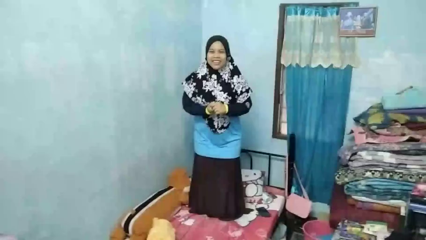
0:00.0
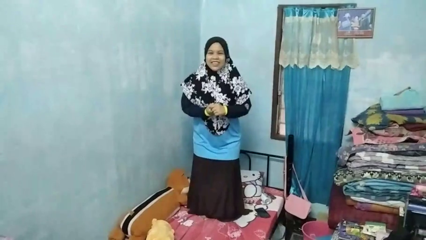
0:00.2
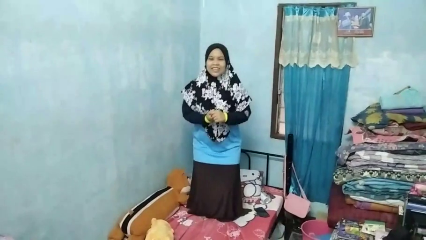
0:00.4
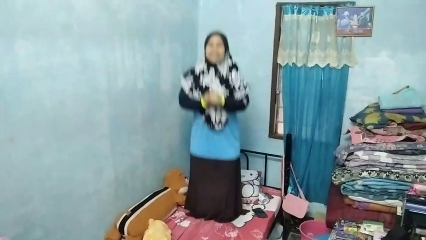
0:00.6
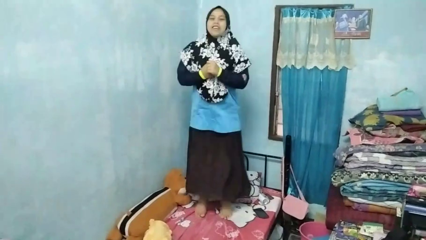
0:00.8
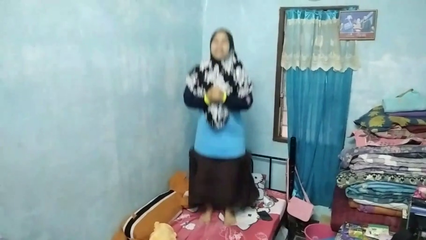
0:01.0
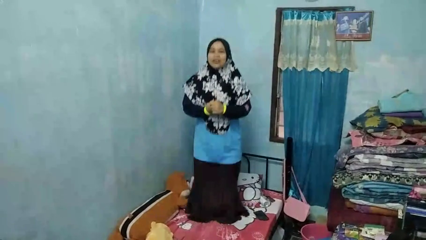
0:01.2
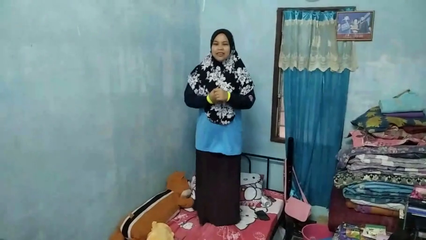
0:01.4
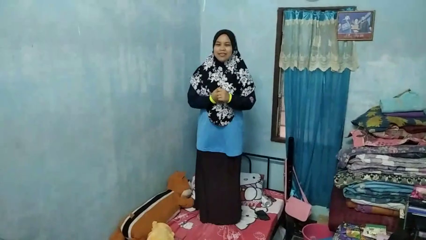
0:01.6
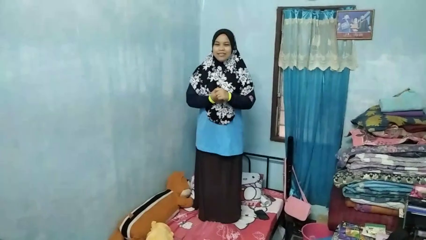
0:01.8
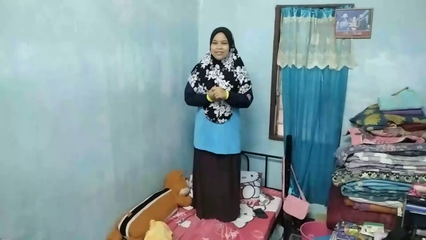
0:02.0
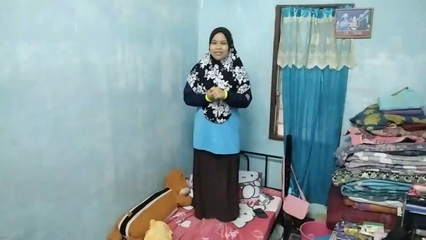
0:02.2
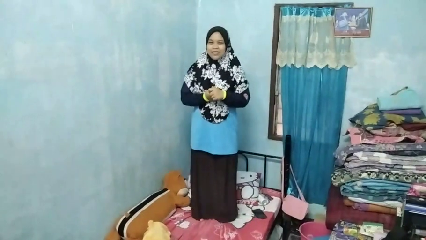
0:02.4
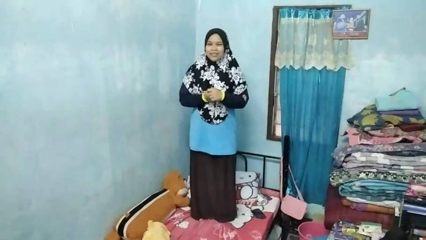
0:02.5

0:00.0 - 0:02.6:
person jumps on bed

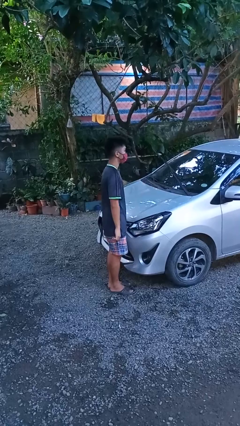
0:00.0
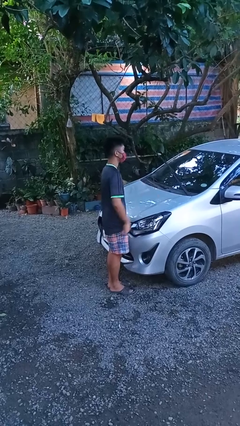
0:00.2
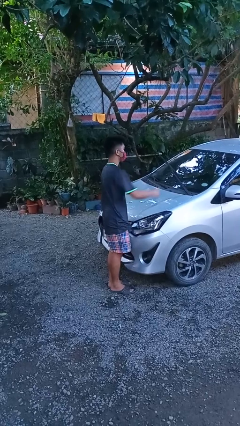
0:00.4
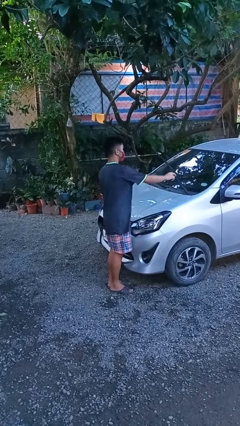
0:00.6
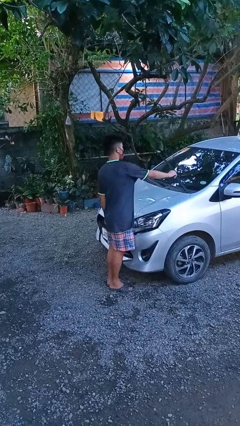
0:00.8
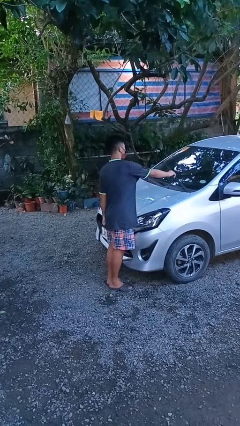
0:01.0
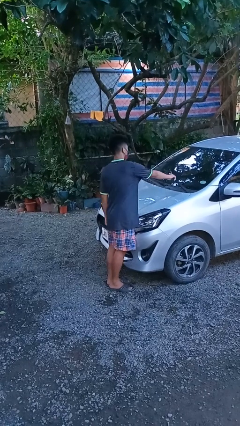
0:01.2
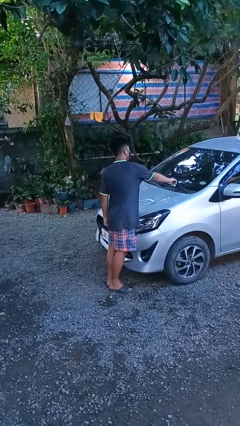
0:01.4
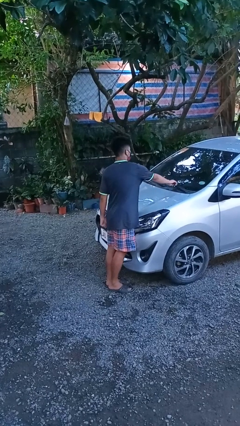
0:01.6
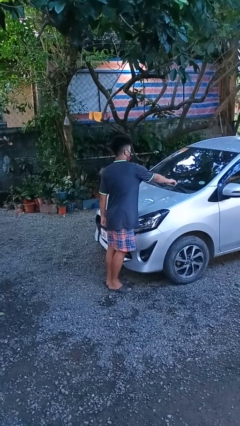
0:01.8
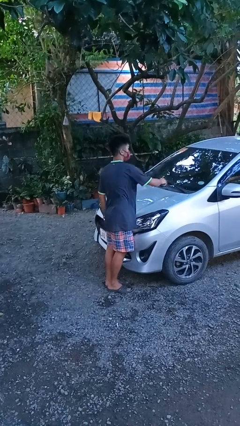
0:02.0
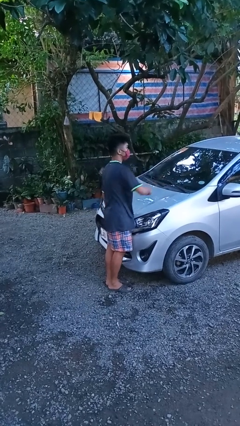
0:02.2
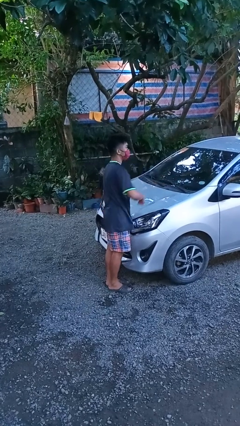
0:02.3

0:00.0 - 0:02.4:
person flips down car wipers

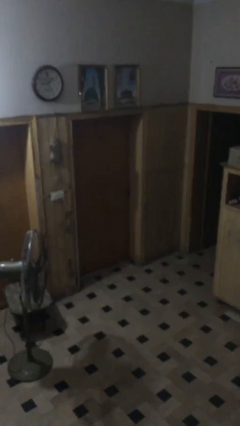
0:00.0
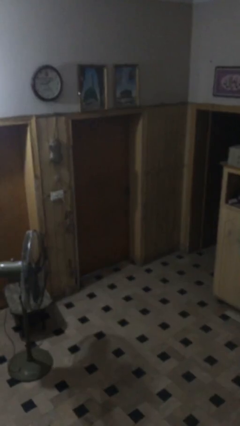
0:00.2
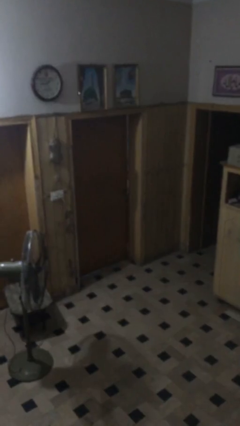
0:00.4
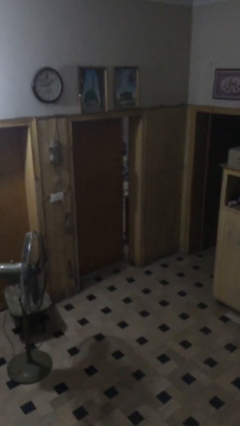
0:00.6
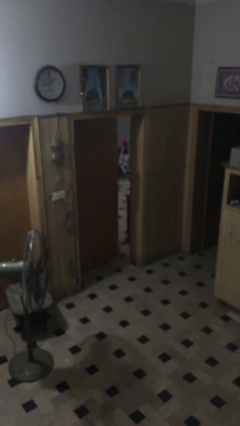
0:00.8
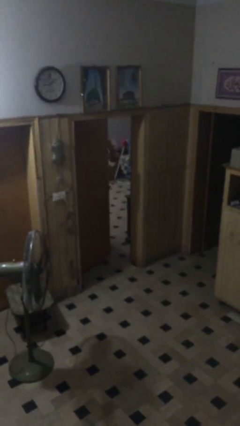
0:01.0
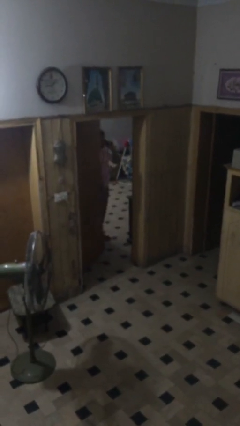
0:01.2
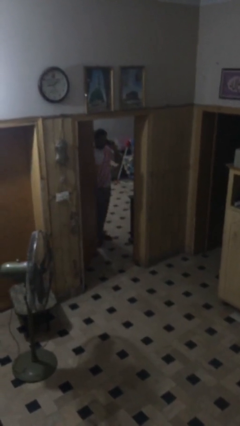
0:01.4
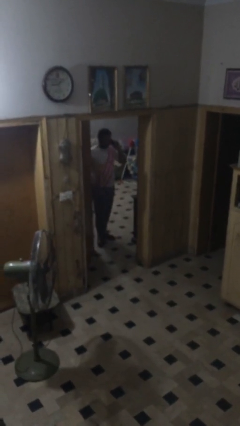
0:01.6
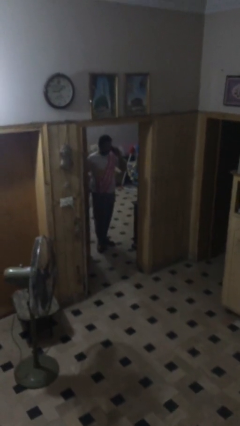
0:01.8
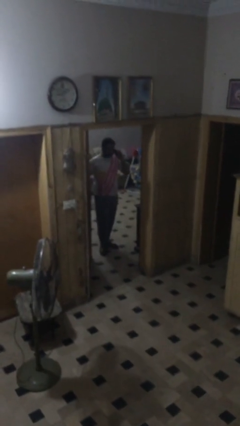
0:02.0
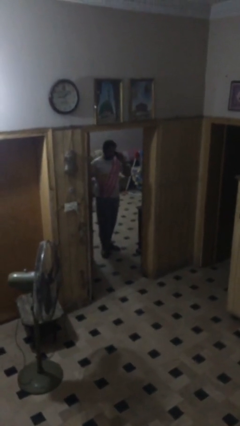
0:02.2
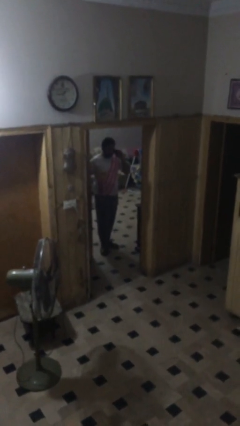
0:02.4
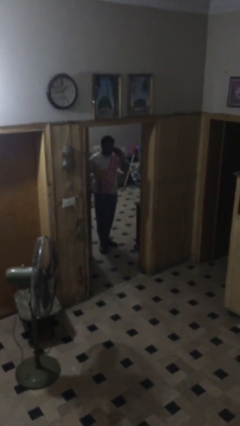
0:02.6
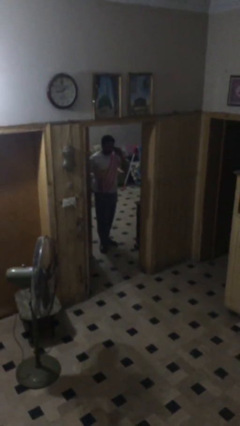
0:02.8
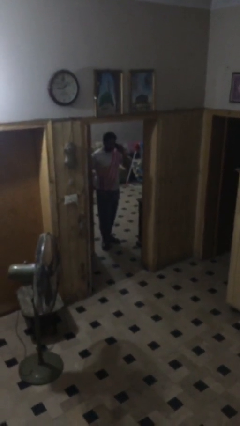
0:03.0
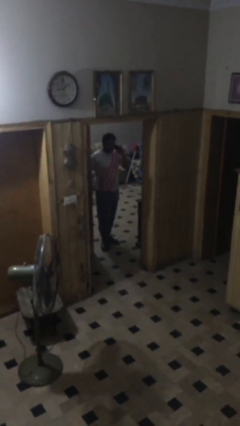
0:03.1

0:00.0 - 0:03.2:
person opens facility door

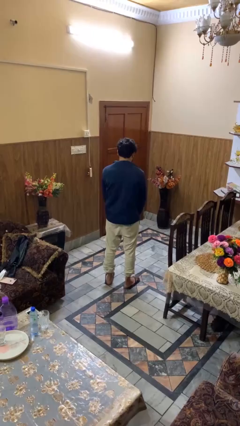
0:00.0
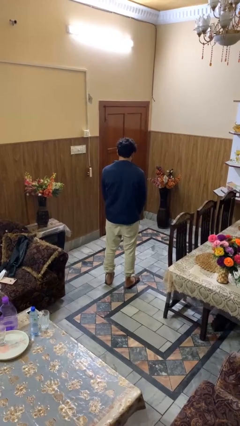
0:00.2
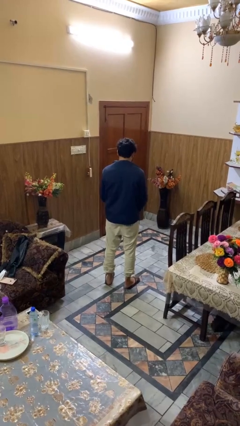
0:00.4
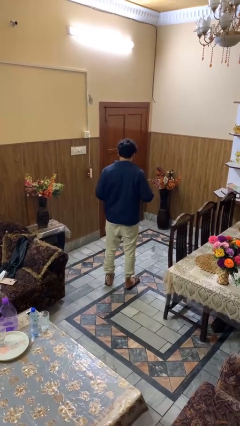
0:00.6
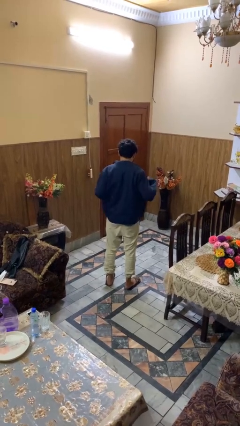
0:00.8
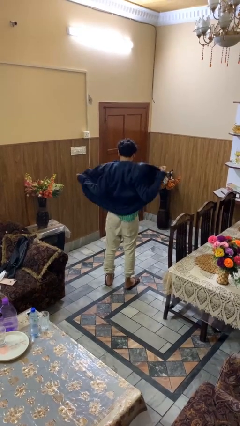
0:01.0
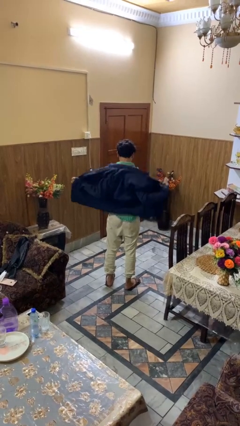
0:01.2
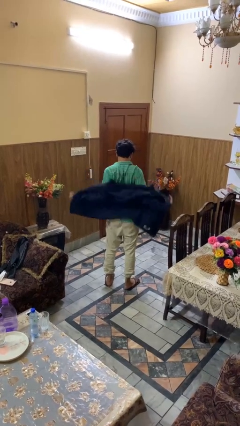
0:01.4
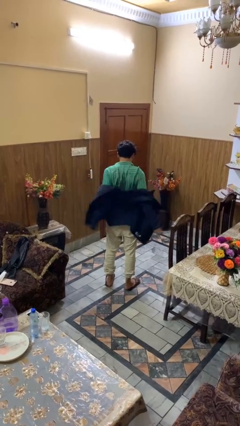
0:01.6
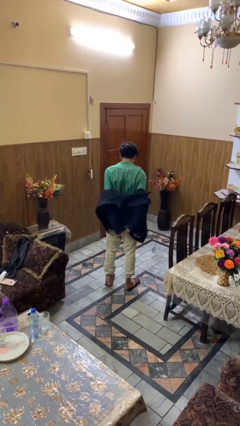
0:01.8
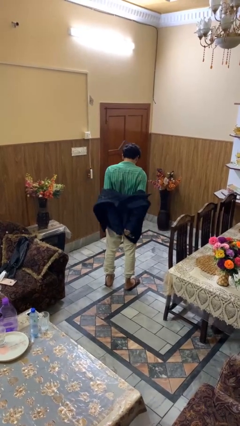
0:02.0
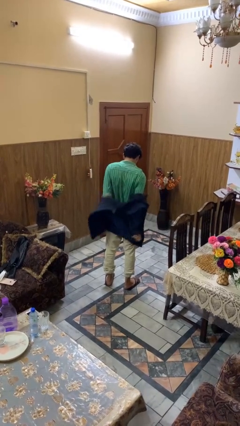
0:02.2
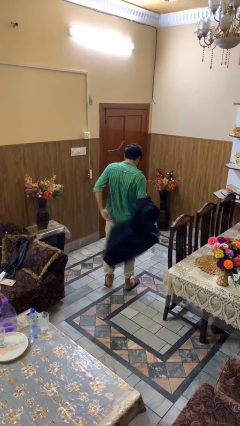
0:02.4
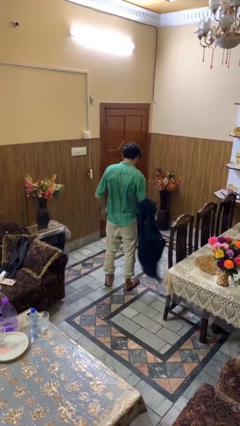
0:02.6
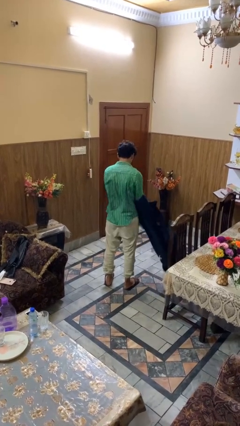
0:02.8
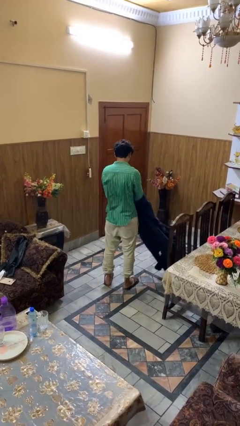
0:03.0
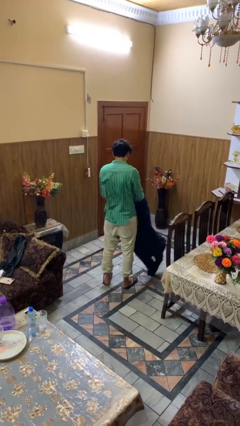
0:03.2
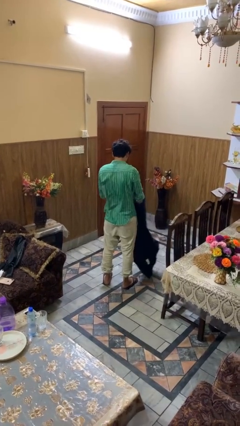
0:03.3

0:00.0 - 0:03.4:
person takes off jacket

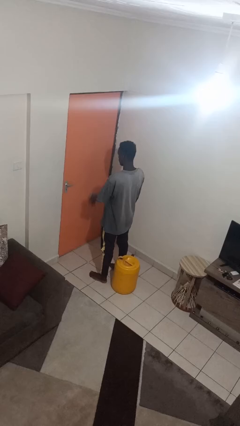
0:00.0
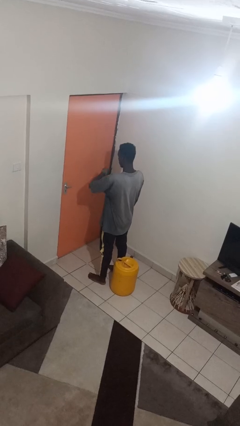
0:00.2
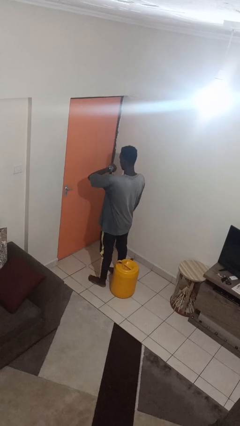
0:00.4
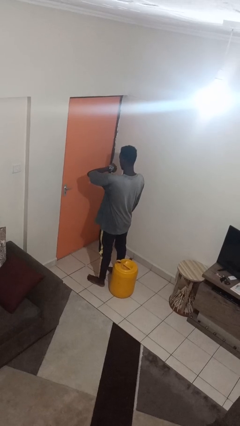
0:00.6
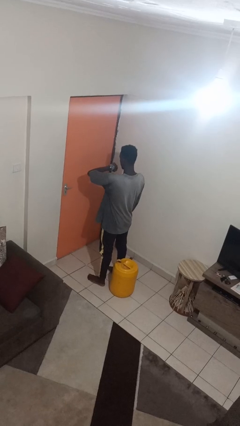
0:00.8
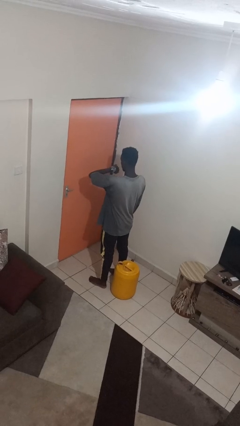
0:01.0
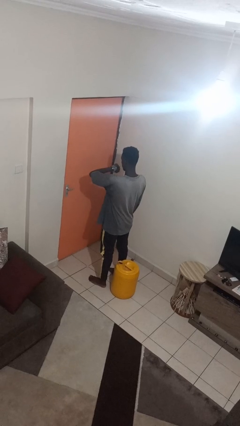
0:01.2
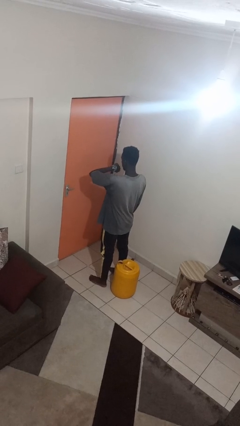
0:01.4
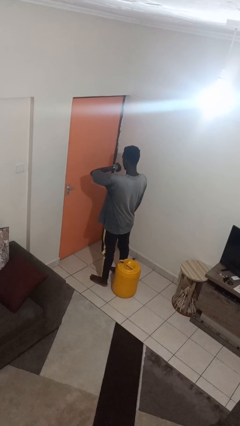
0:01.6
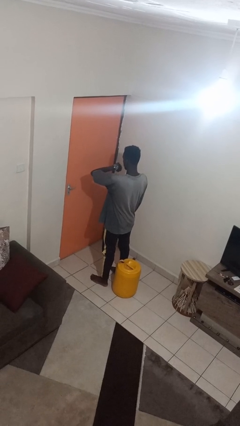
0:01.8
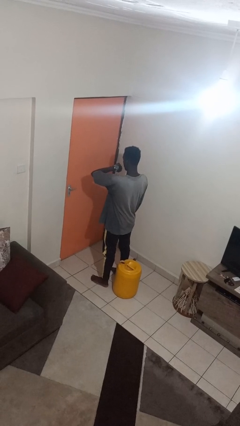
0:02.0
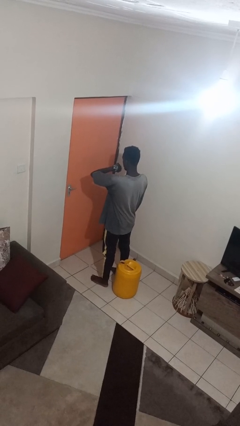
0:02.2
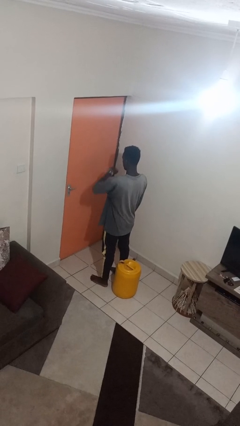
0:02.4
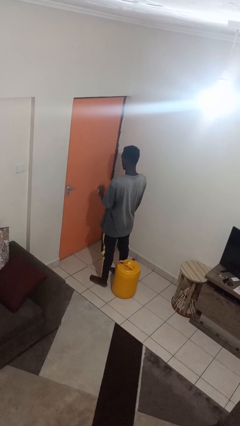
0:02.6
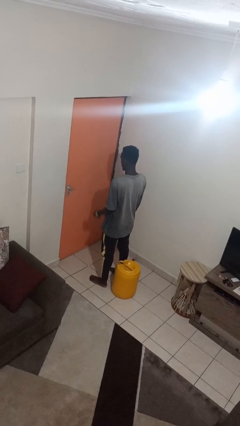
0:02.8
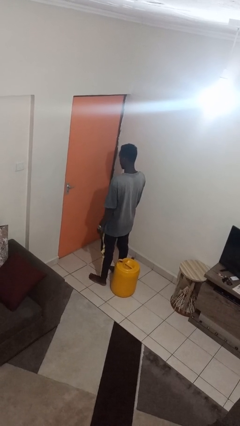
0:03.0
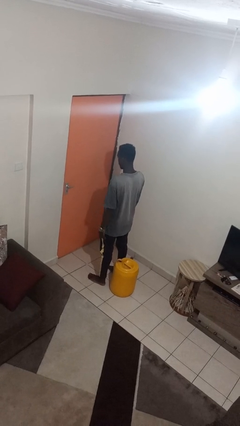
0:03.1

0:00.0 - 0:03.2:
person looks at wristwatch

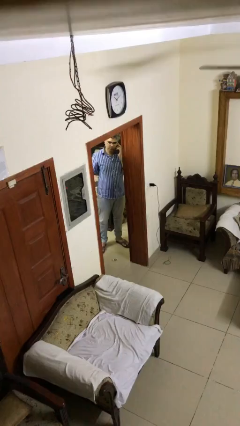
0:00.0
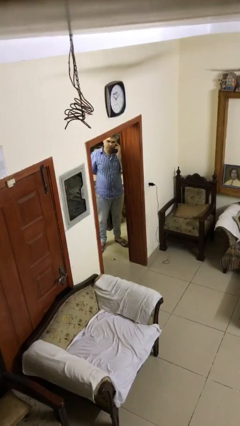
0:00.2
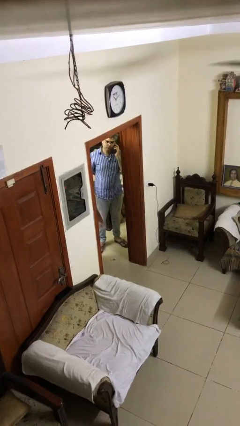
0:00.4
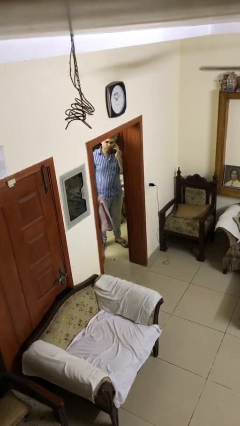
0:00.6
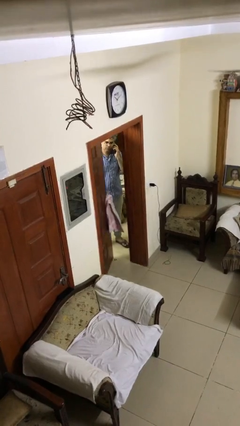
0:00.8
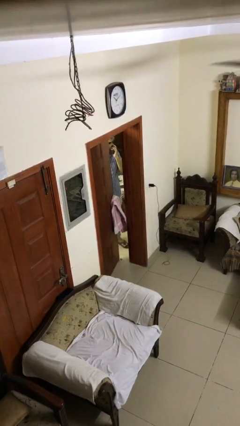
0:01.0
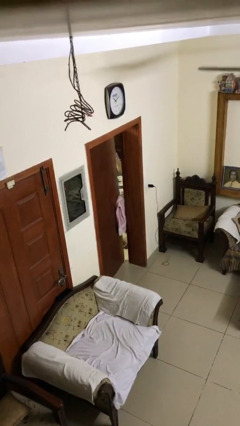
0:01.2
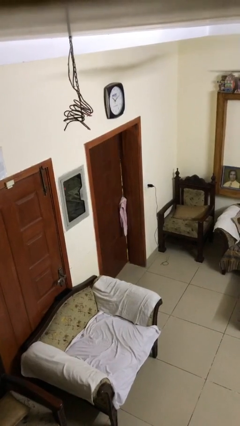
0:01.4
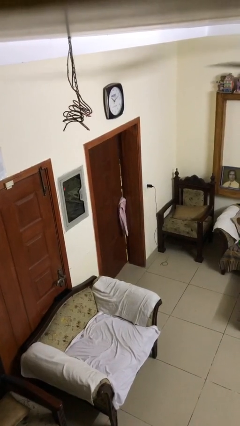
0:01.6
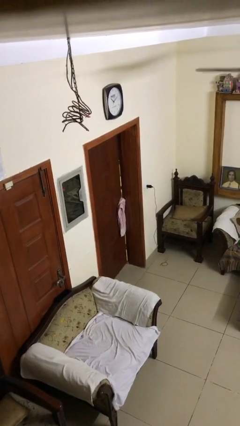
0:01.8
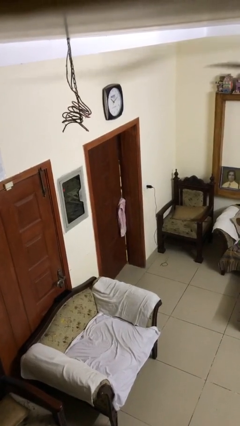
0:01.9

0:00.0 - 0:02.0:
person closes facility door

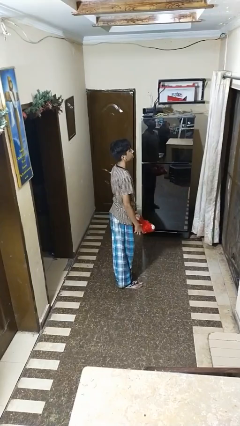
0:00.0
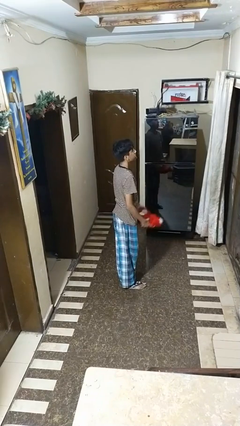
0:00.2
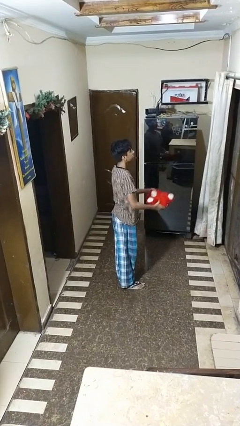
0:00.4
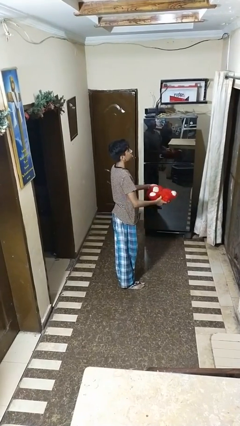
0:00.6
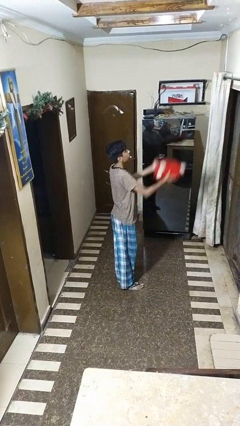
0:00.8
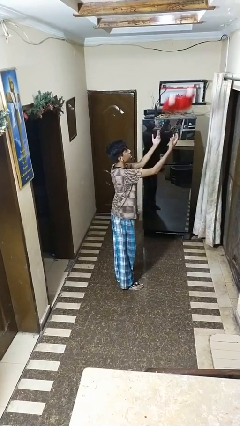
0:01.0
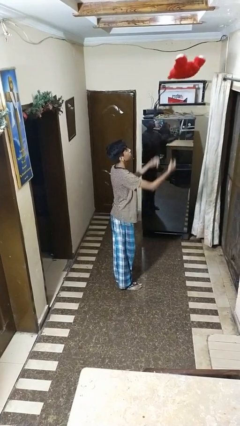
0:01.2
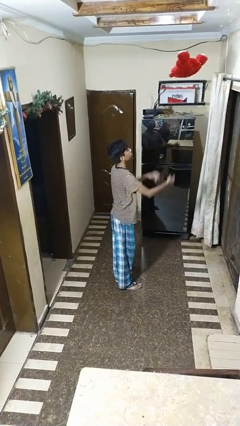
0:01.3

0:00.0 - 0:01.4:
person drops object
